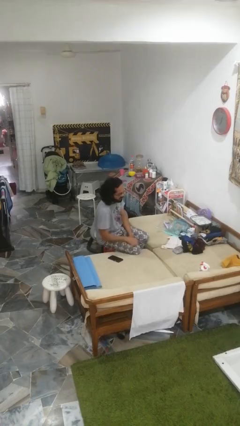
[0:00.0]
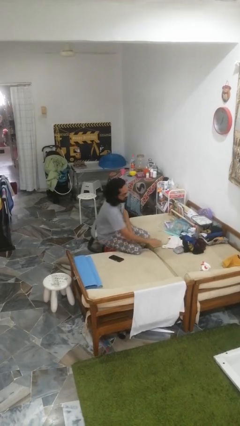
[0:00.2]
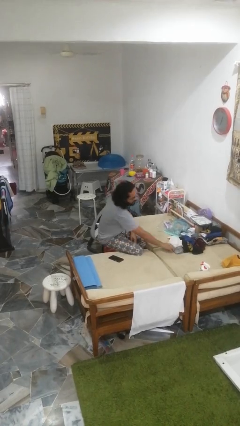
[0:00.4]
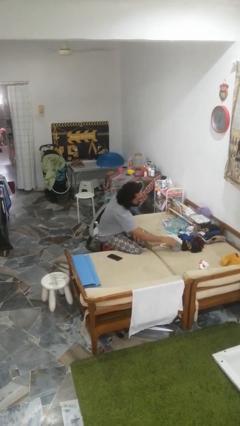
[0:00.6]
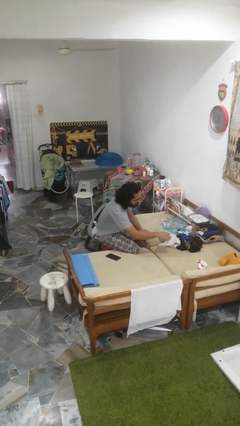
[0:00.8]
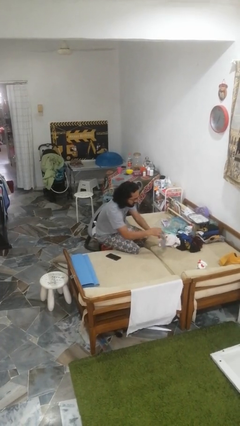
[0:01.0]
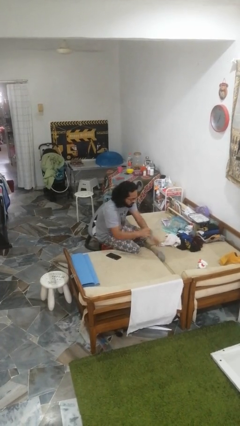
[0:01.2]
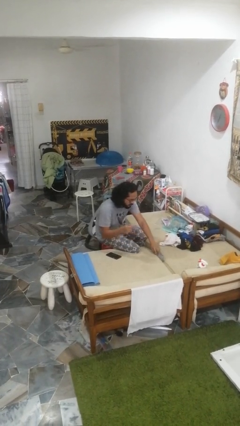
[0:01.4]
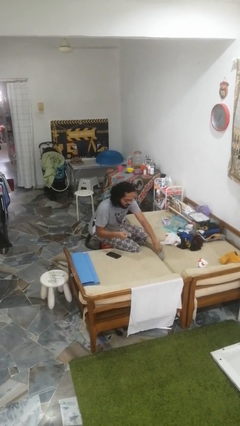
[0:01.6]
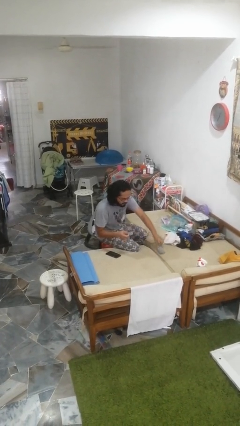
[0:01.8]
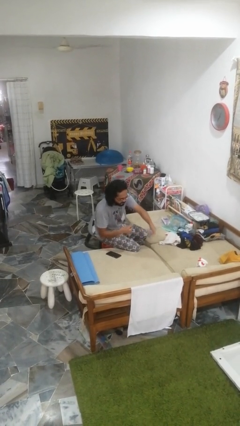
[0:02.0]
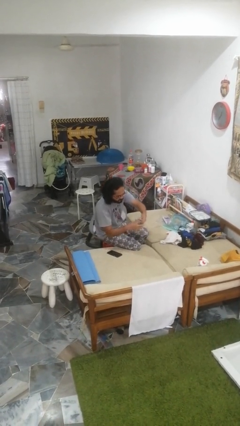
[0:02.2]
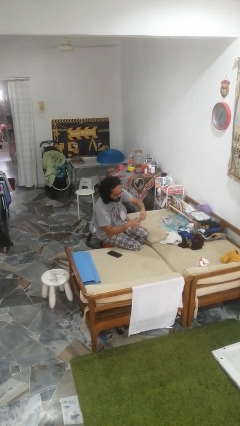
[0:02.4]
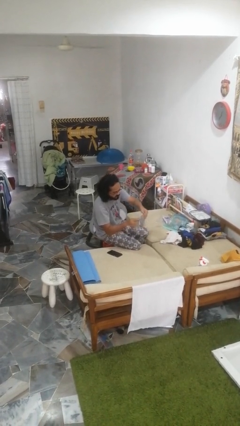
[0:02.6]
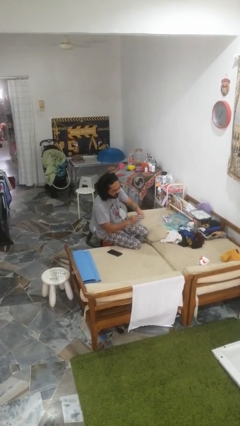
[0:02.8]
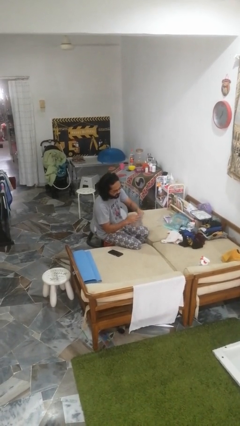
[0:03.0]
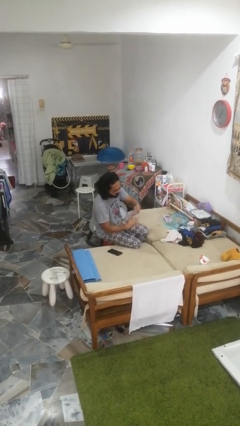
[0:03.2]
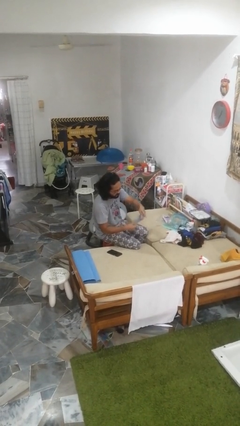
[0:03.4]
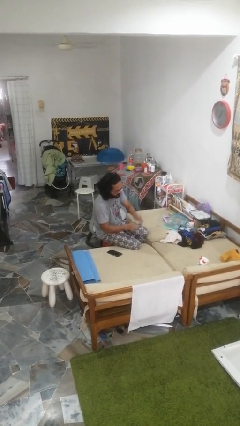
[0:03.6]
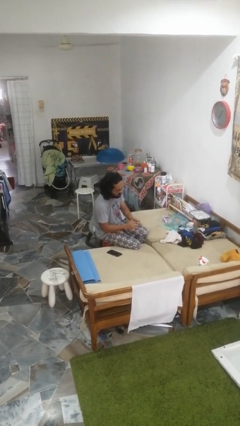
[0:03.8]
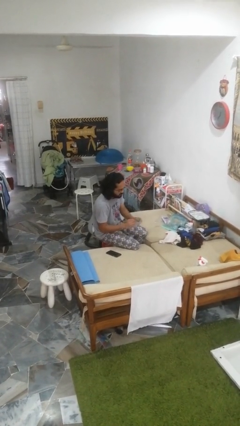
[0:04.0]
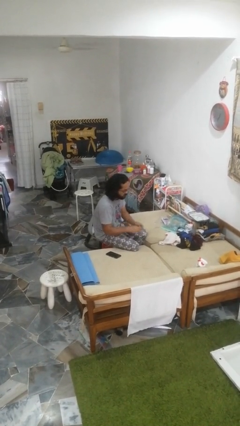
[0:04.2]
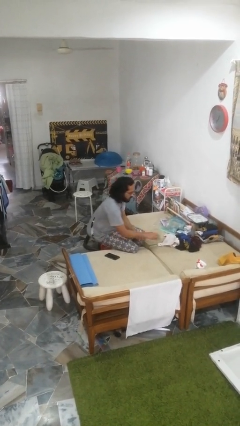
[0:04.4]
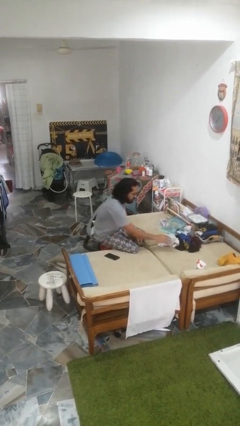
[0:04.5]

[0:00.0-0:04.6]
person folds socks

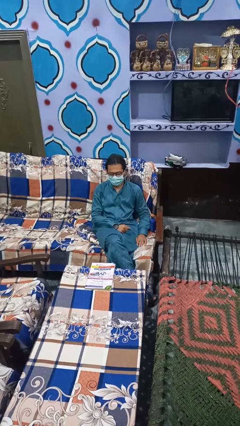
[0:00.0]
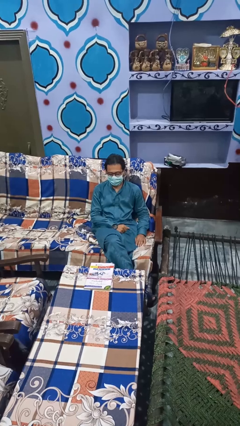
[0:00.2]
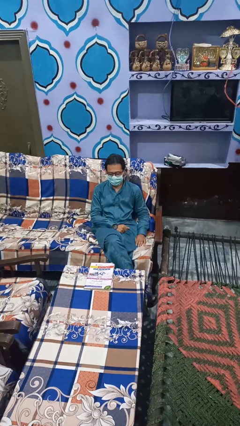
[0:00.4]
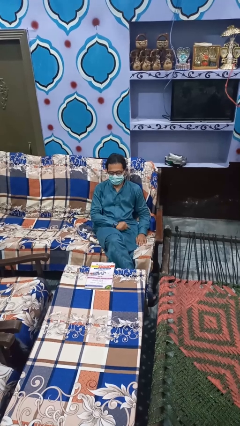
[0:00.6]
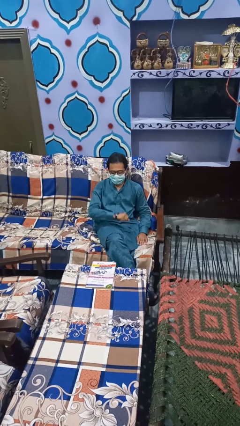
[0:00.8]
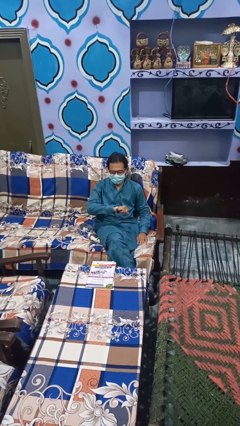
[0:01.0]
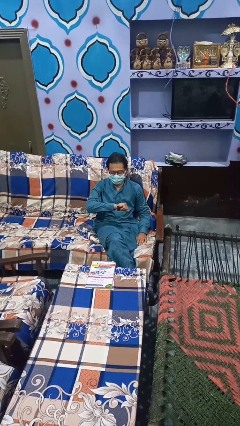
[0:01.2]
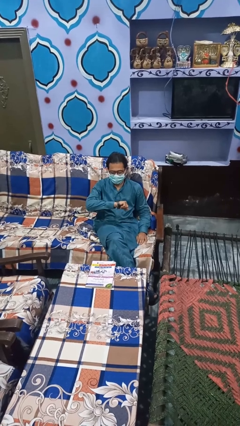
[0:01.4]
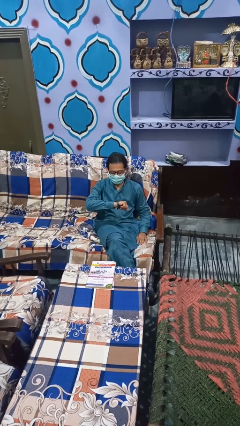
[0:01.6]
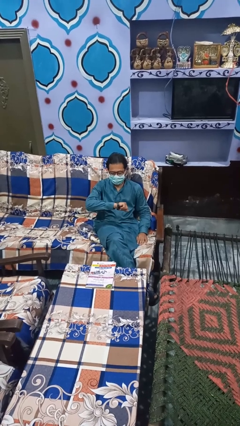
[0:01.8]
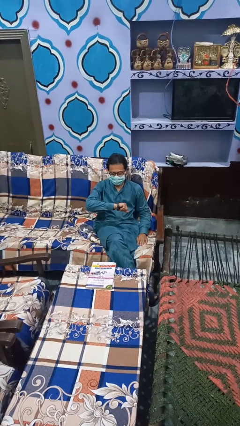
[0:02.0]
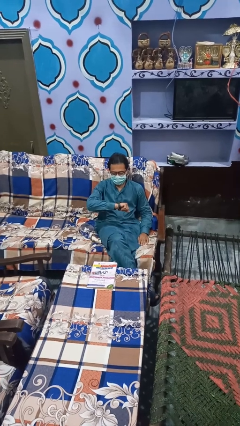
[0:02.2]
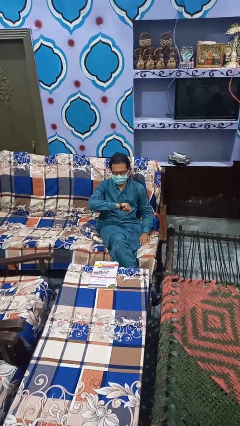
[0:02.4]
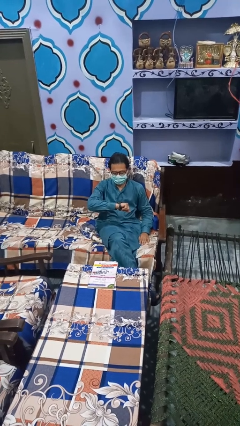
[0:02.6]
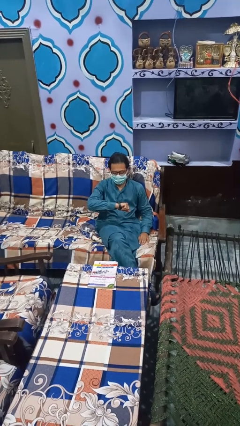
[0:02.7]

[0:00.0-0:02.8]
person looks at wristwatch

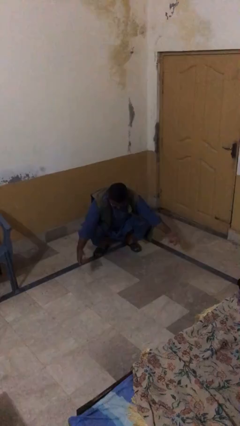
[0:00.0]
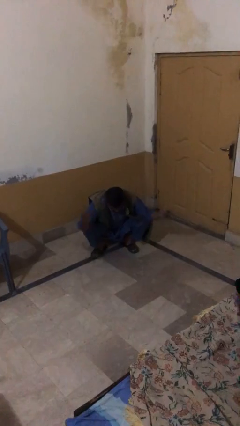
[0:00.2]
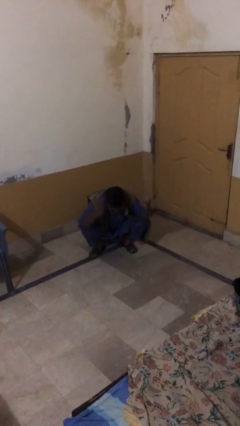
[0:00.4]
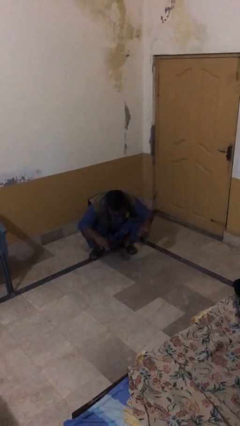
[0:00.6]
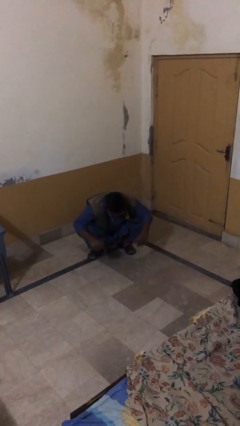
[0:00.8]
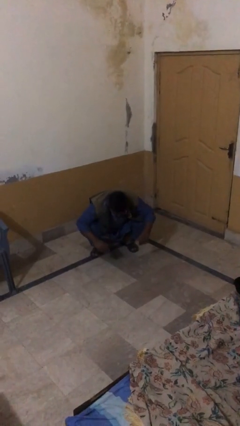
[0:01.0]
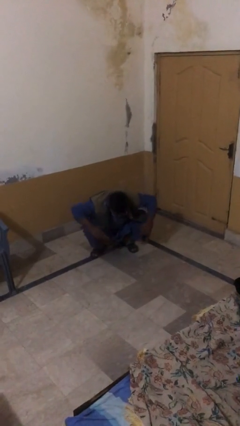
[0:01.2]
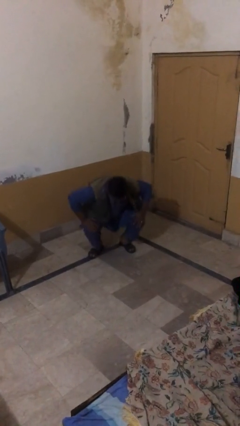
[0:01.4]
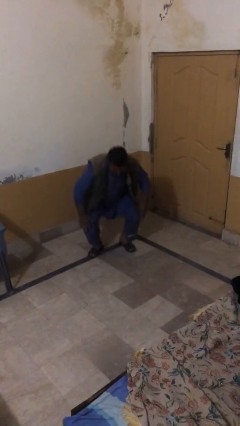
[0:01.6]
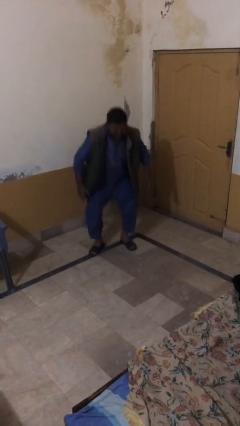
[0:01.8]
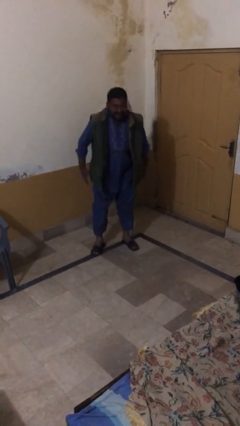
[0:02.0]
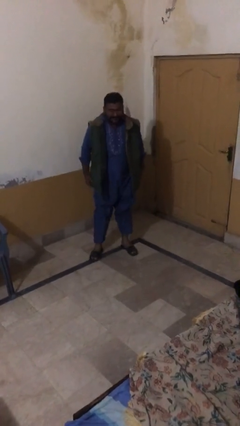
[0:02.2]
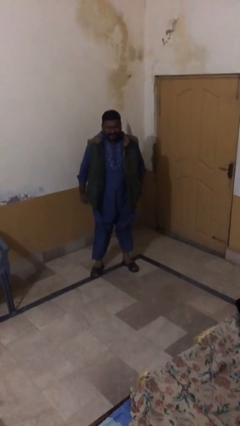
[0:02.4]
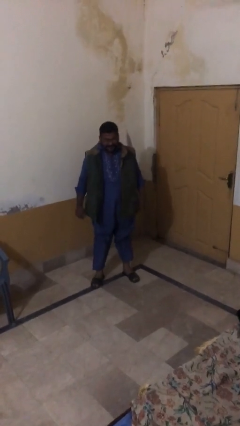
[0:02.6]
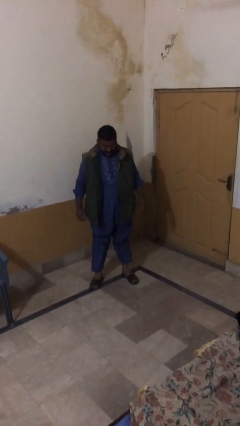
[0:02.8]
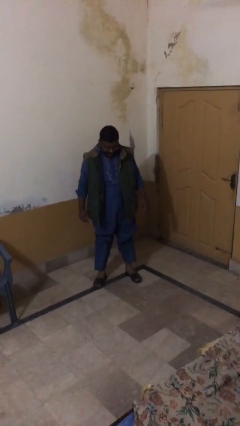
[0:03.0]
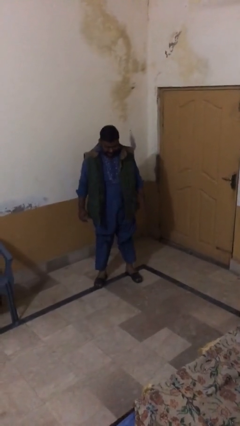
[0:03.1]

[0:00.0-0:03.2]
person stands up

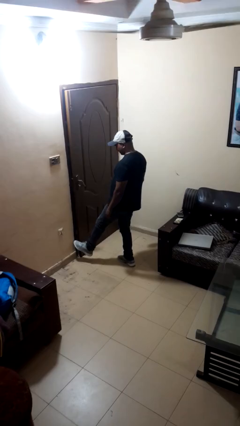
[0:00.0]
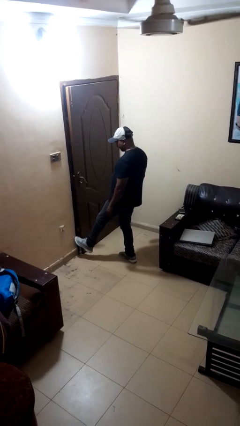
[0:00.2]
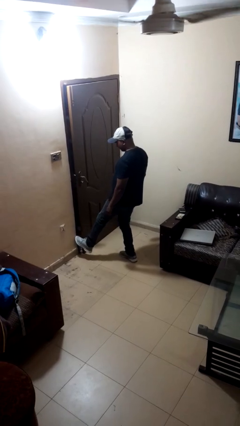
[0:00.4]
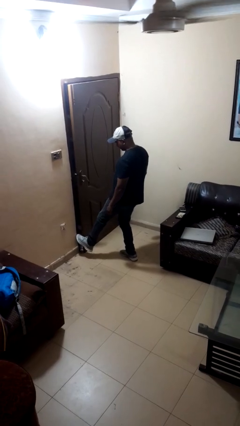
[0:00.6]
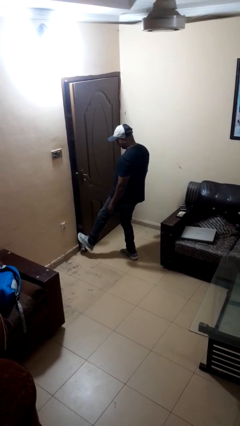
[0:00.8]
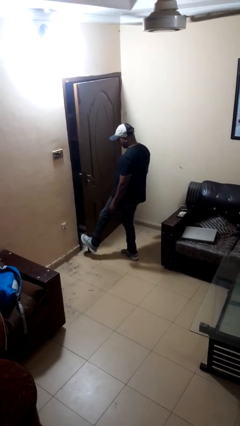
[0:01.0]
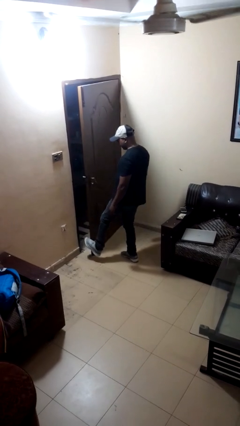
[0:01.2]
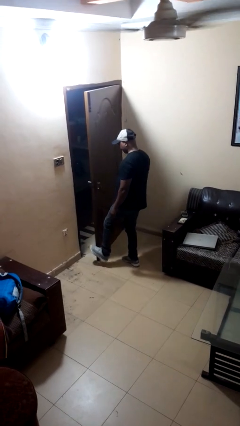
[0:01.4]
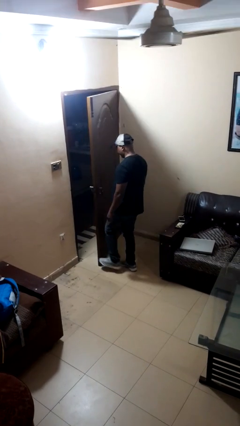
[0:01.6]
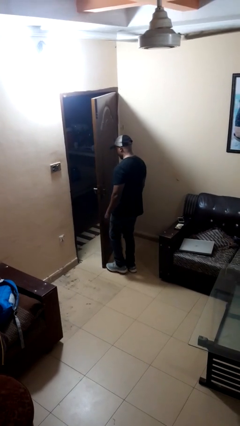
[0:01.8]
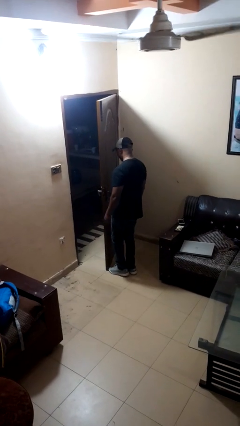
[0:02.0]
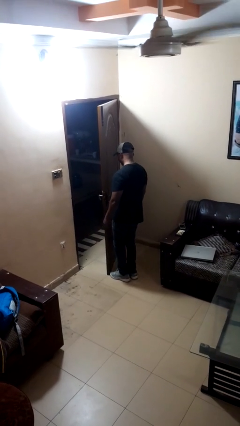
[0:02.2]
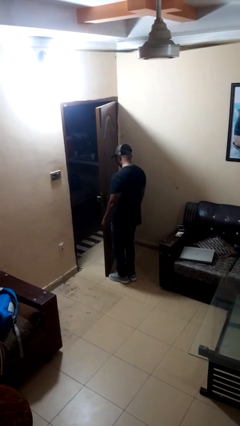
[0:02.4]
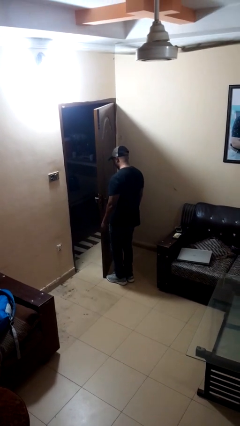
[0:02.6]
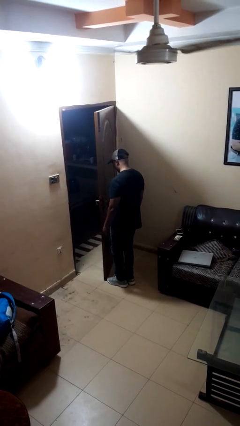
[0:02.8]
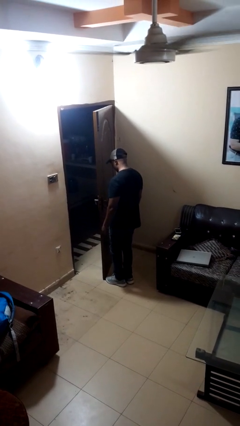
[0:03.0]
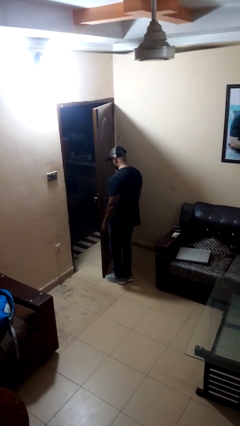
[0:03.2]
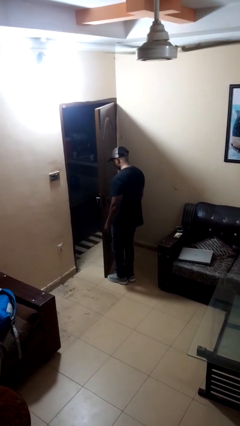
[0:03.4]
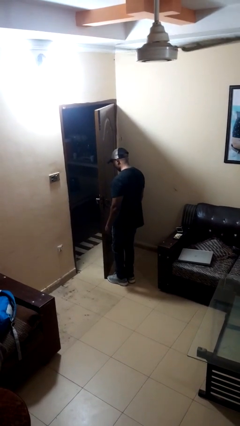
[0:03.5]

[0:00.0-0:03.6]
person opens facility door

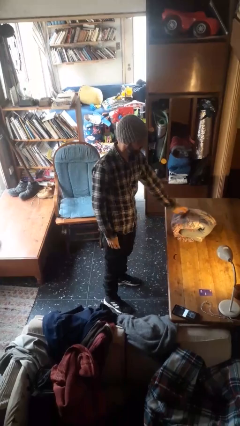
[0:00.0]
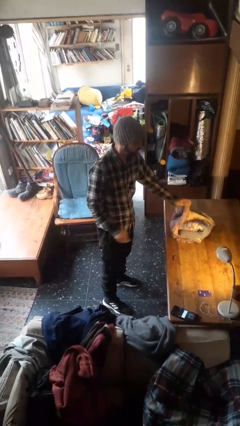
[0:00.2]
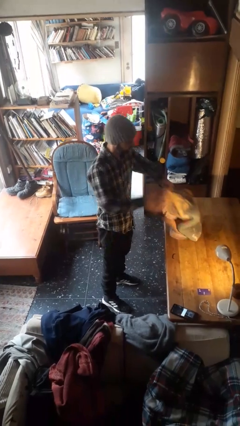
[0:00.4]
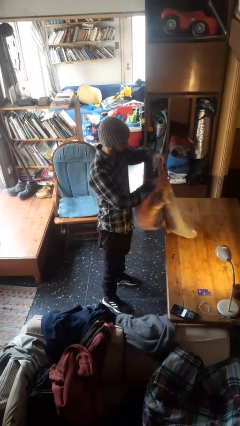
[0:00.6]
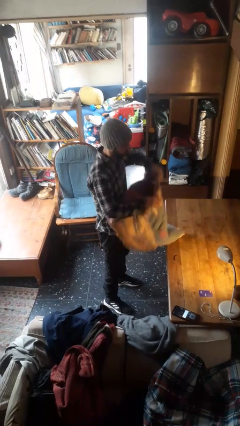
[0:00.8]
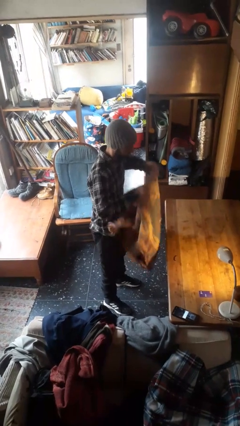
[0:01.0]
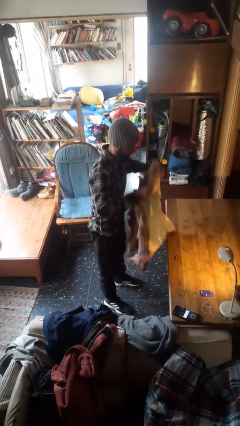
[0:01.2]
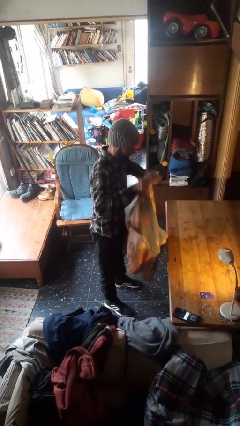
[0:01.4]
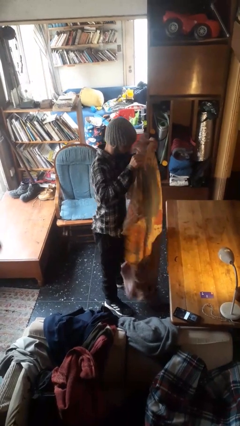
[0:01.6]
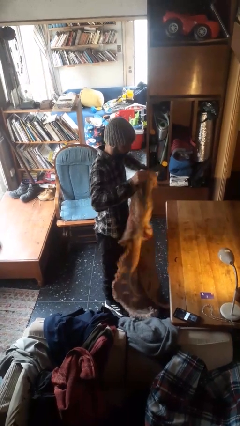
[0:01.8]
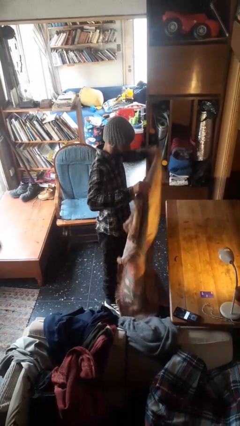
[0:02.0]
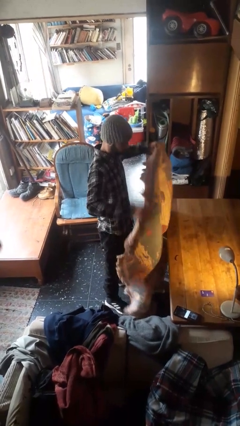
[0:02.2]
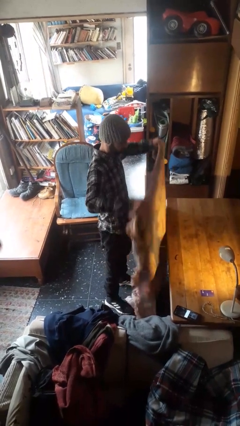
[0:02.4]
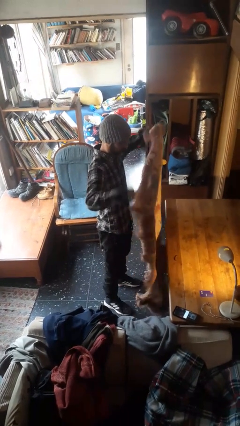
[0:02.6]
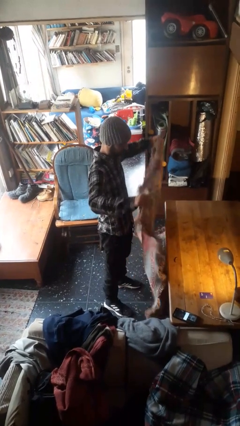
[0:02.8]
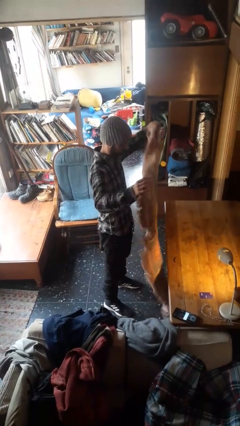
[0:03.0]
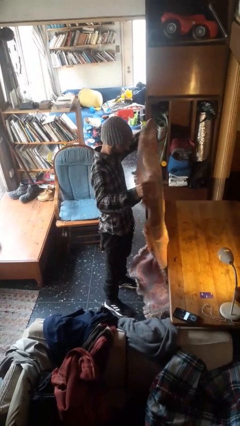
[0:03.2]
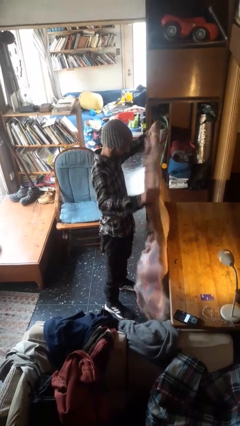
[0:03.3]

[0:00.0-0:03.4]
person unfolds blanket

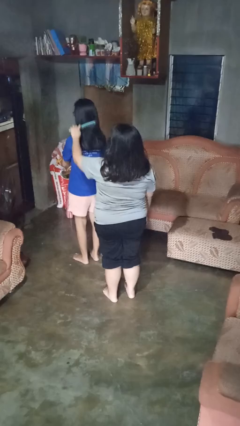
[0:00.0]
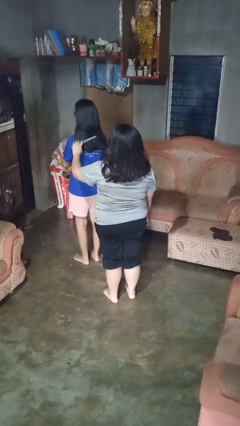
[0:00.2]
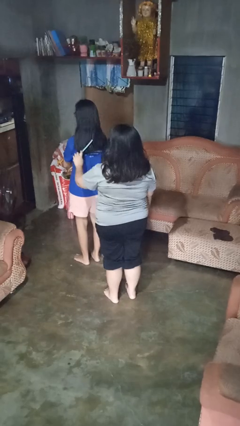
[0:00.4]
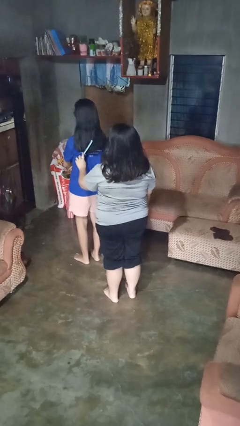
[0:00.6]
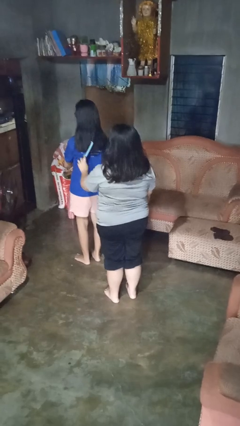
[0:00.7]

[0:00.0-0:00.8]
person brushes hair of person
